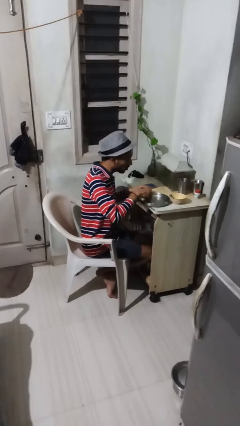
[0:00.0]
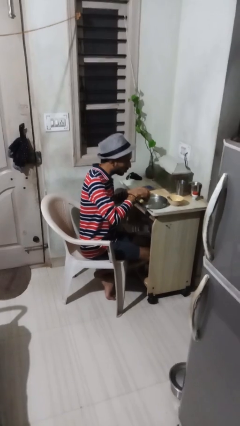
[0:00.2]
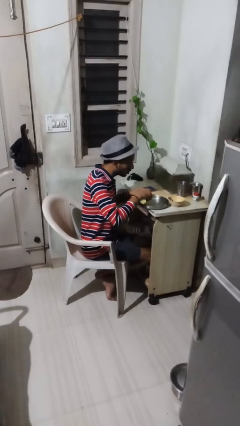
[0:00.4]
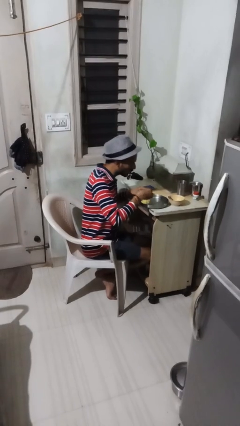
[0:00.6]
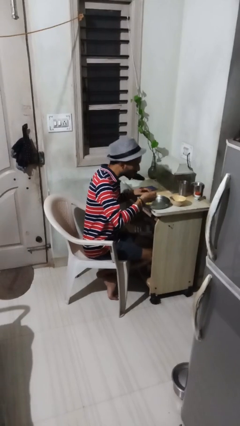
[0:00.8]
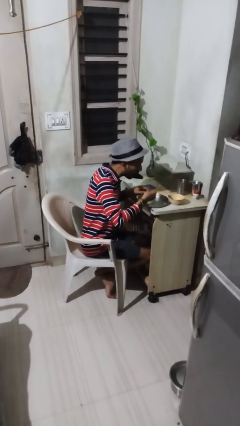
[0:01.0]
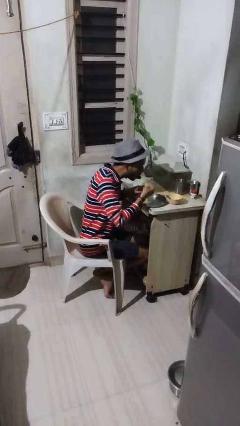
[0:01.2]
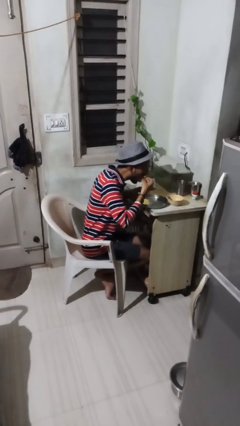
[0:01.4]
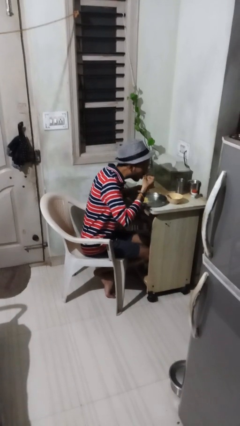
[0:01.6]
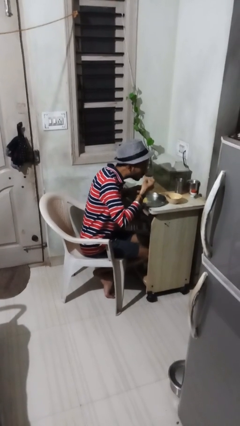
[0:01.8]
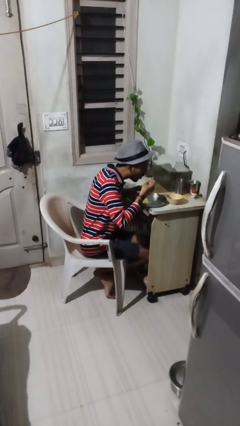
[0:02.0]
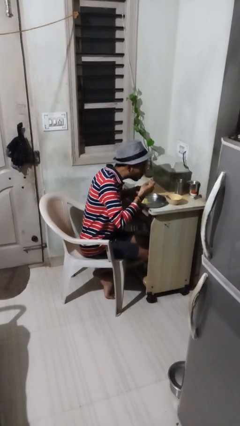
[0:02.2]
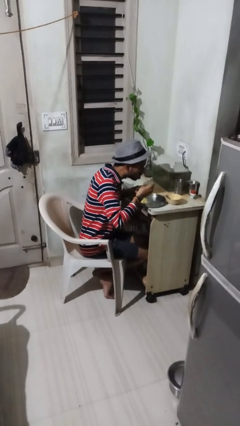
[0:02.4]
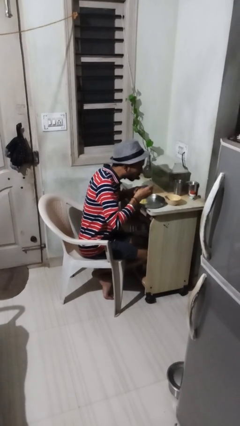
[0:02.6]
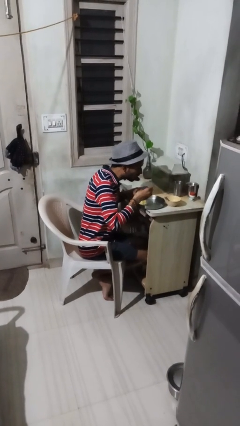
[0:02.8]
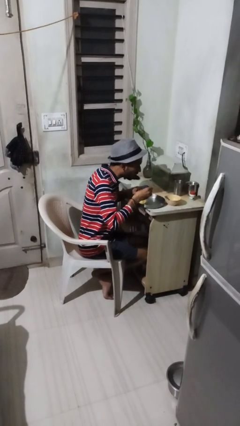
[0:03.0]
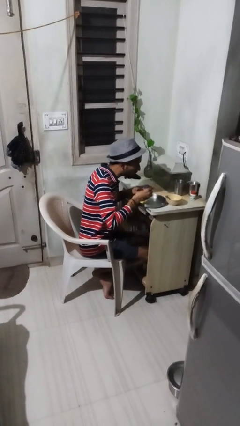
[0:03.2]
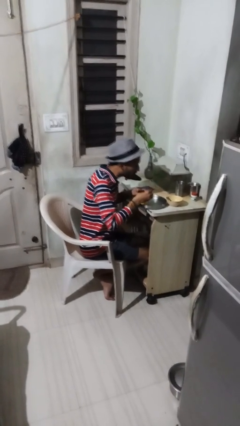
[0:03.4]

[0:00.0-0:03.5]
person eats with utensil

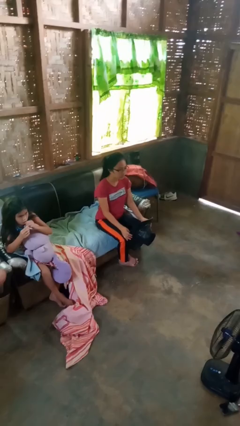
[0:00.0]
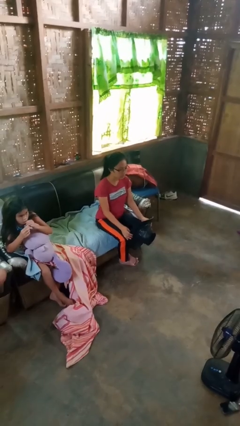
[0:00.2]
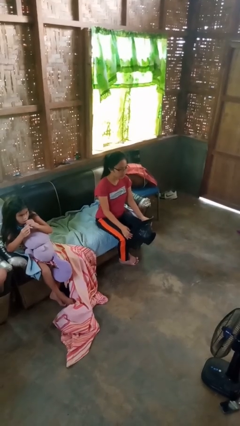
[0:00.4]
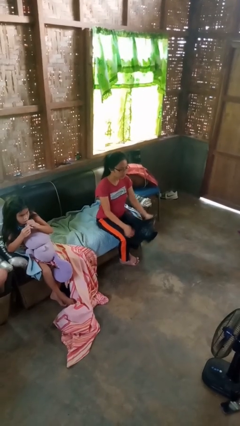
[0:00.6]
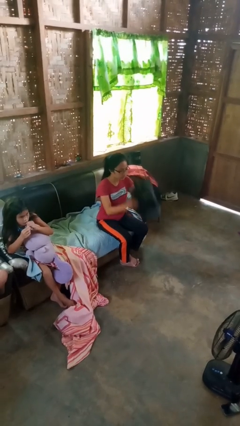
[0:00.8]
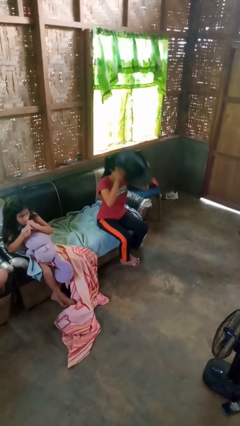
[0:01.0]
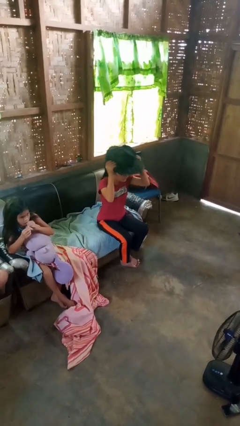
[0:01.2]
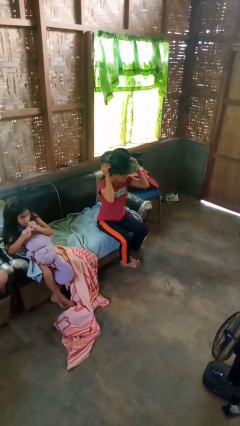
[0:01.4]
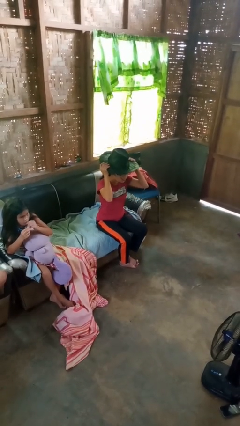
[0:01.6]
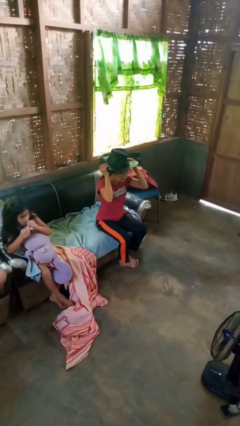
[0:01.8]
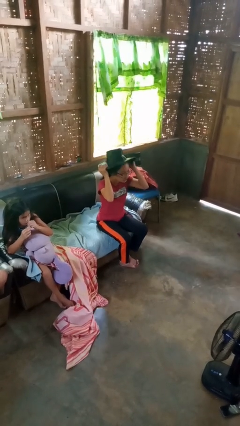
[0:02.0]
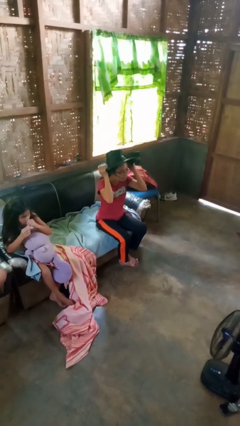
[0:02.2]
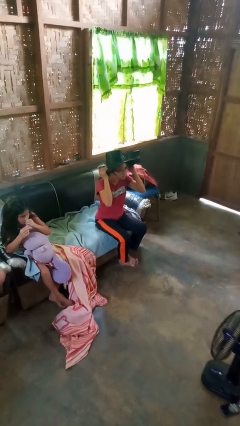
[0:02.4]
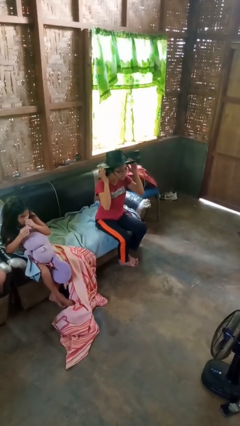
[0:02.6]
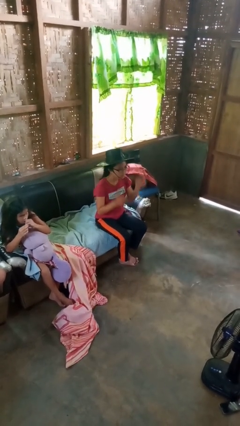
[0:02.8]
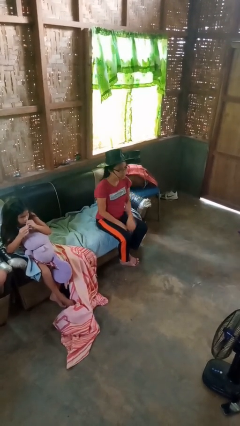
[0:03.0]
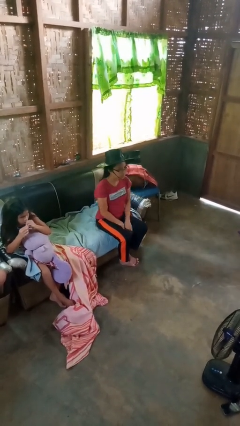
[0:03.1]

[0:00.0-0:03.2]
person puts on hat

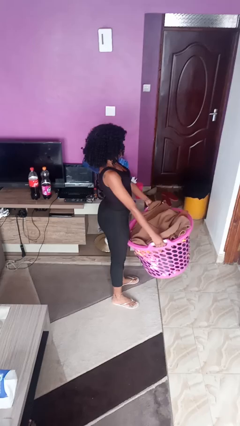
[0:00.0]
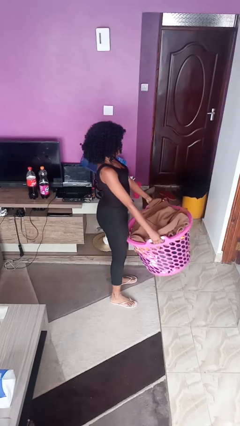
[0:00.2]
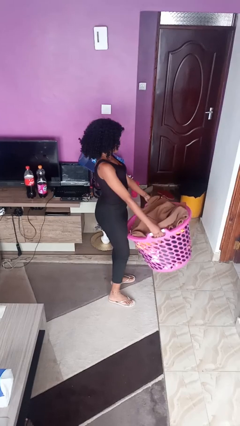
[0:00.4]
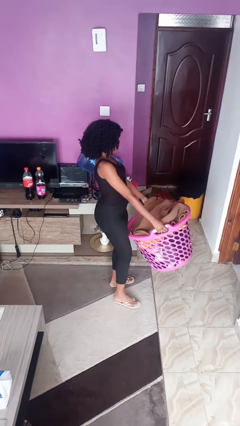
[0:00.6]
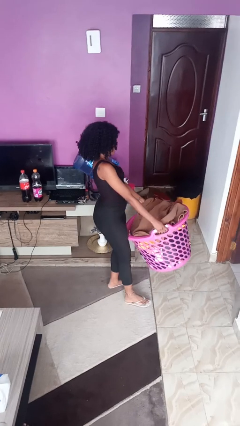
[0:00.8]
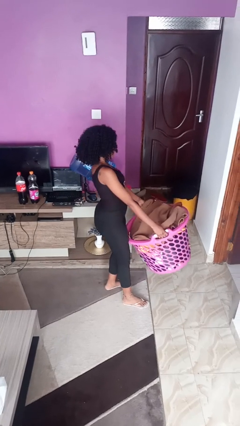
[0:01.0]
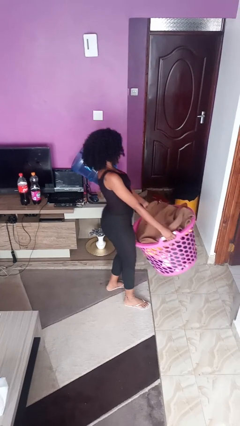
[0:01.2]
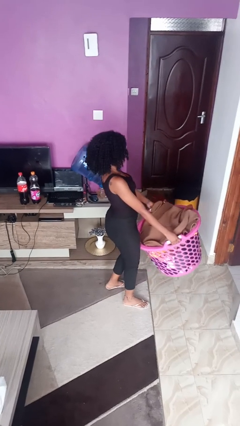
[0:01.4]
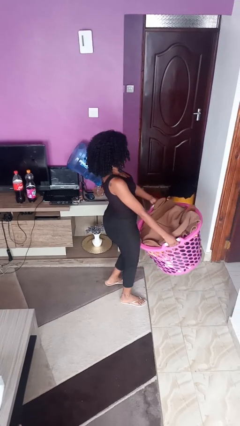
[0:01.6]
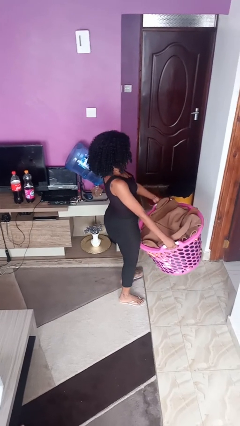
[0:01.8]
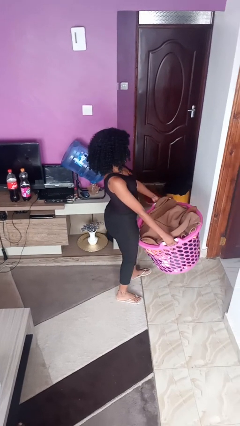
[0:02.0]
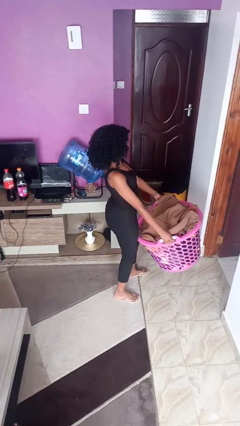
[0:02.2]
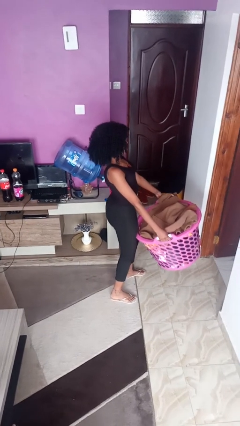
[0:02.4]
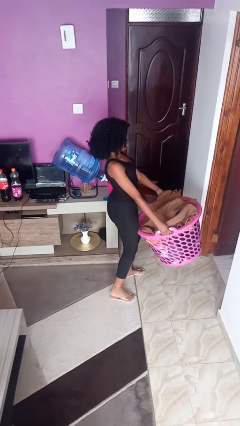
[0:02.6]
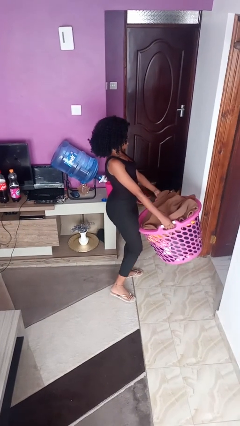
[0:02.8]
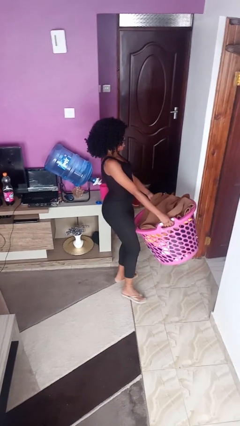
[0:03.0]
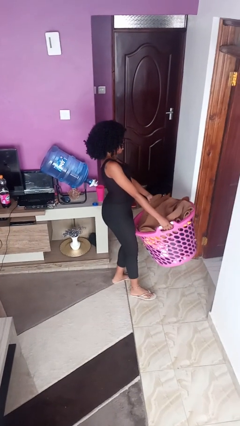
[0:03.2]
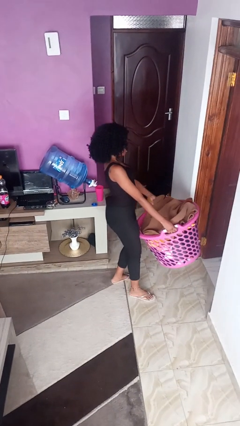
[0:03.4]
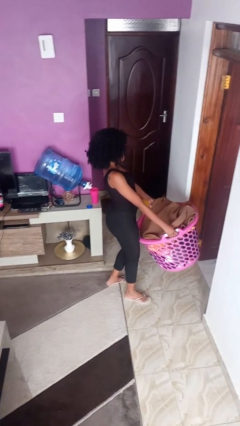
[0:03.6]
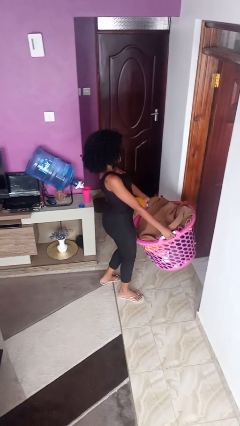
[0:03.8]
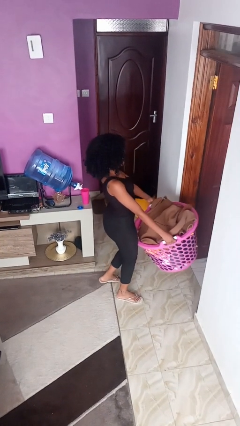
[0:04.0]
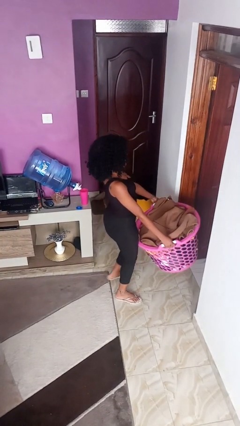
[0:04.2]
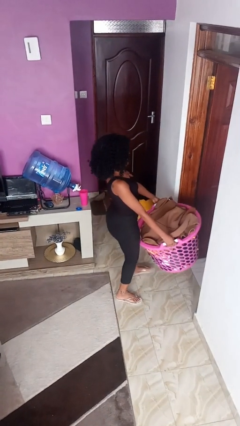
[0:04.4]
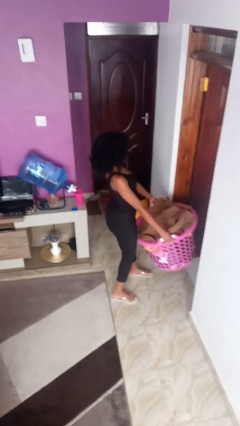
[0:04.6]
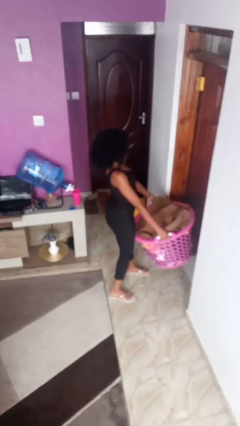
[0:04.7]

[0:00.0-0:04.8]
person carries laundry basket

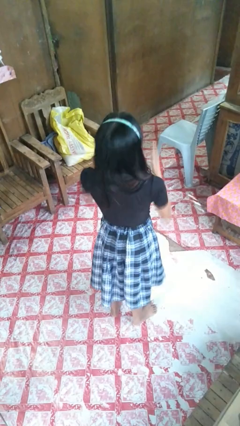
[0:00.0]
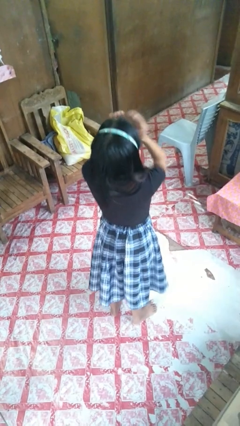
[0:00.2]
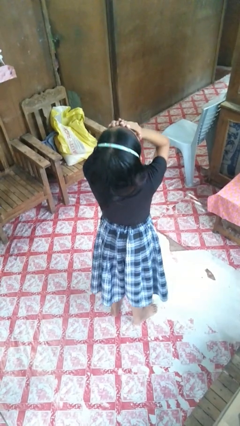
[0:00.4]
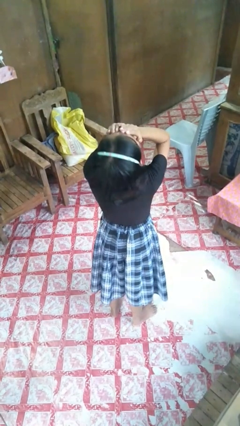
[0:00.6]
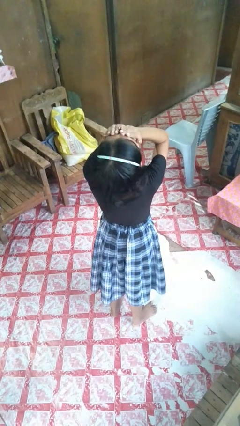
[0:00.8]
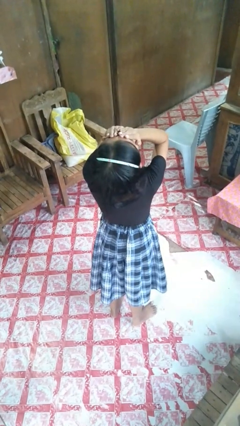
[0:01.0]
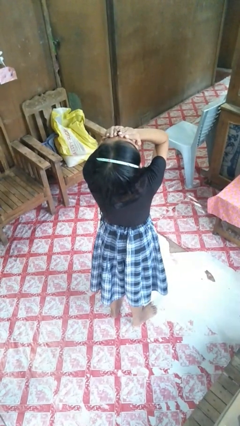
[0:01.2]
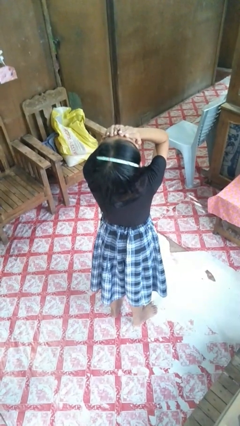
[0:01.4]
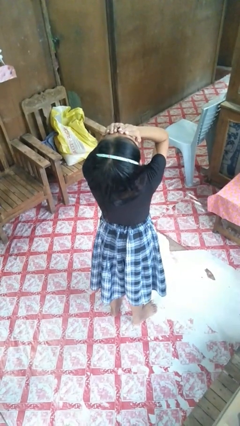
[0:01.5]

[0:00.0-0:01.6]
person covers face with hands

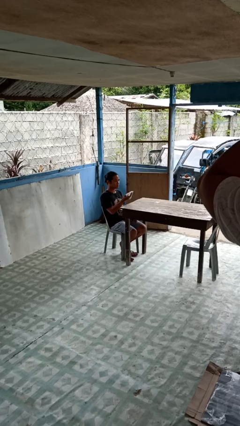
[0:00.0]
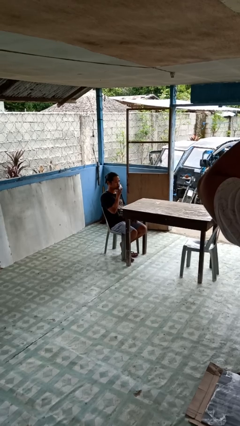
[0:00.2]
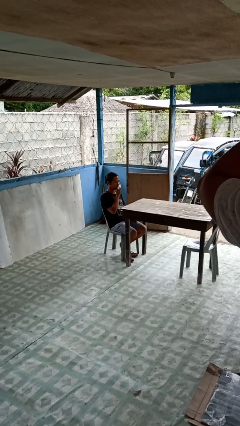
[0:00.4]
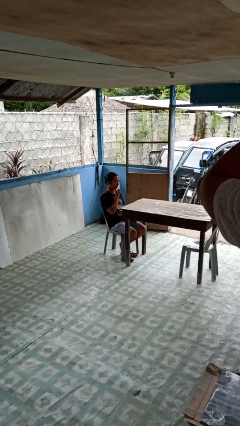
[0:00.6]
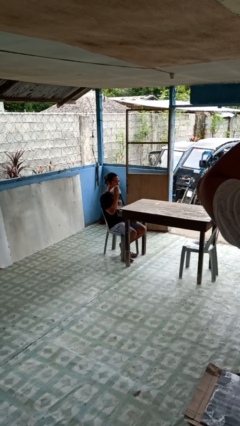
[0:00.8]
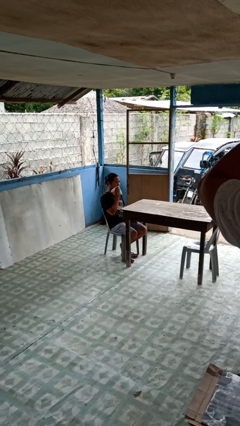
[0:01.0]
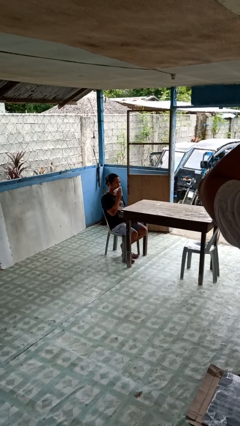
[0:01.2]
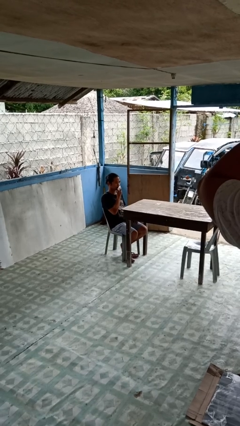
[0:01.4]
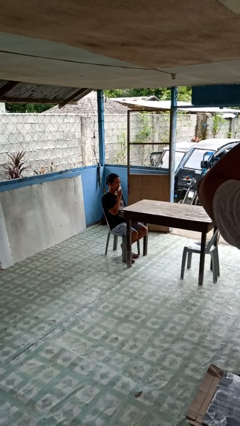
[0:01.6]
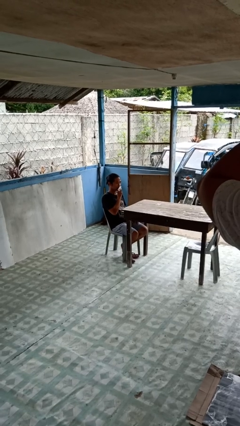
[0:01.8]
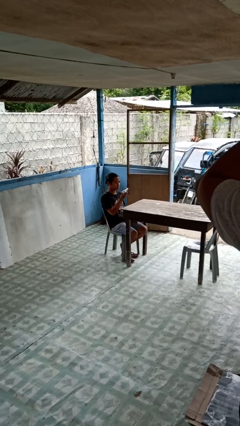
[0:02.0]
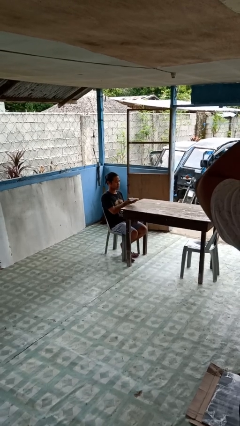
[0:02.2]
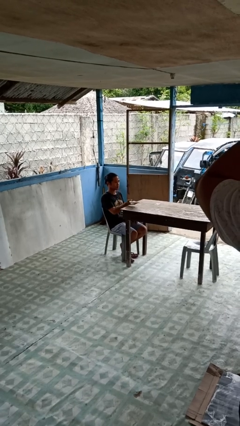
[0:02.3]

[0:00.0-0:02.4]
person wipes mouth with napkin

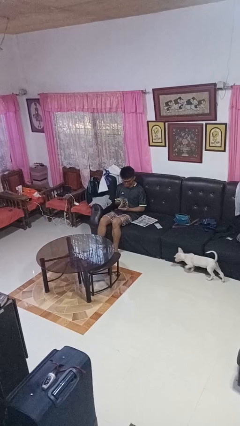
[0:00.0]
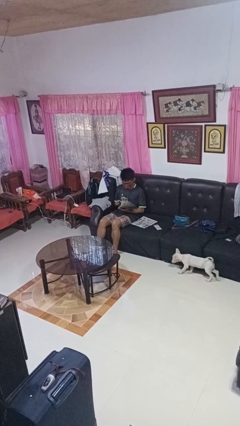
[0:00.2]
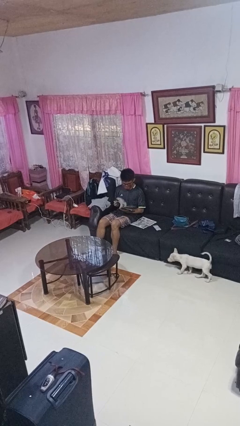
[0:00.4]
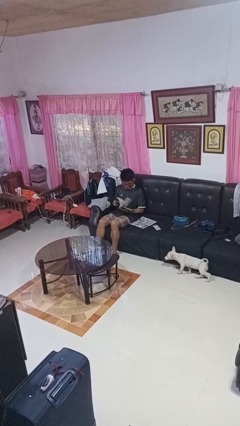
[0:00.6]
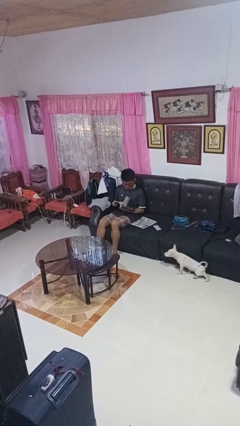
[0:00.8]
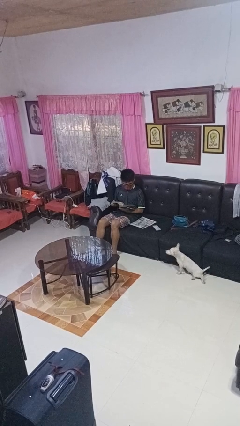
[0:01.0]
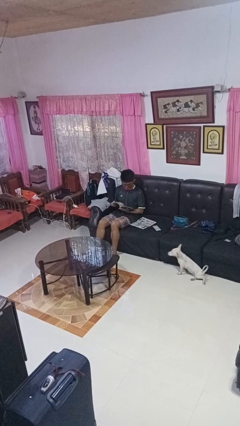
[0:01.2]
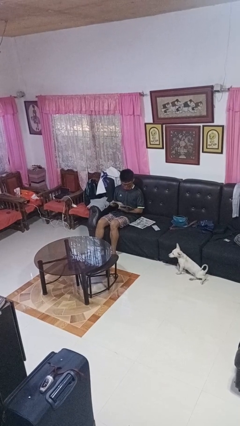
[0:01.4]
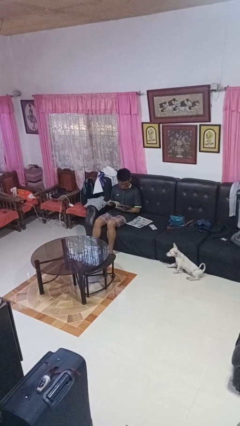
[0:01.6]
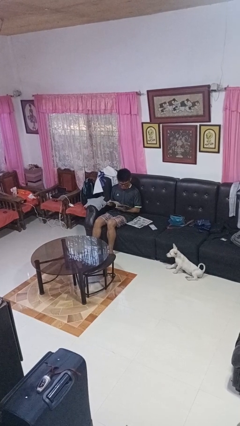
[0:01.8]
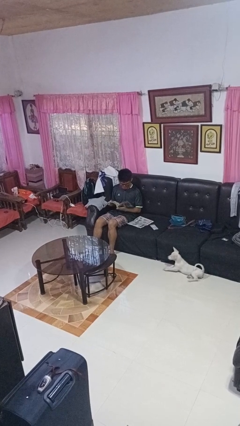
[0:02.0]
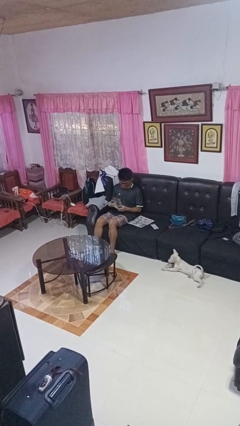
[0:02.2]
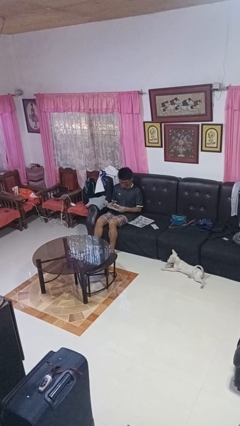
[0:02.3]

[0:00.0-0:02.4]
person reads magazine
